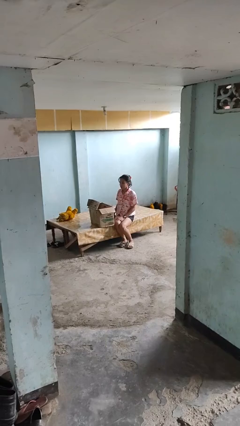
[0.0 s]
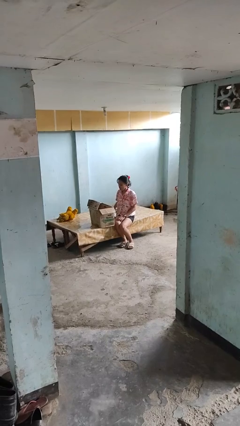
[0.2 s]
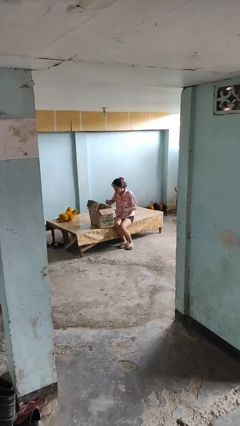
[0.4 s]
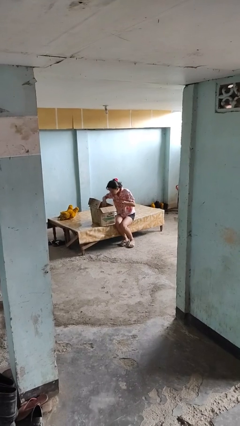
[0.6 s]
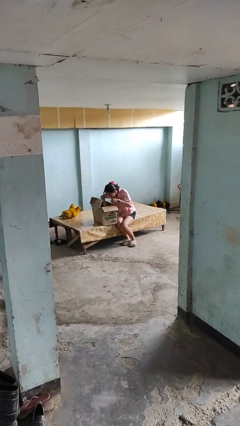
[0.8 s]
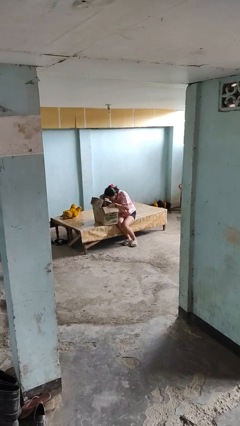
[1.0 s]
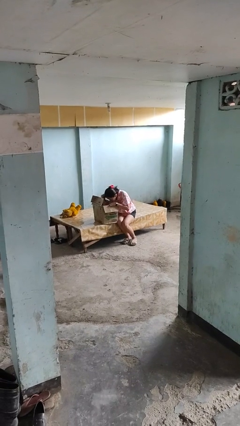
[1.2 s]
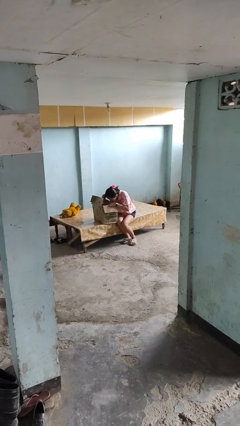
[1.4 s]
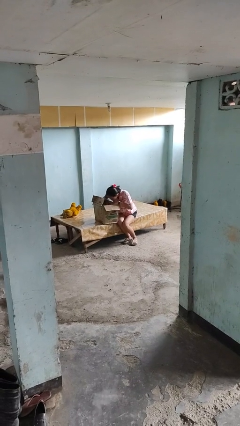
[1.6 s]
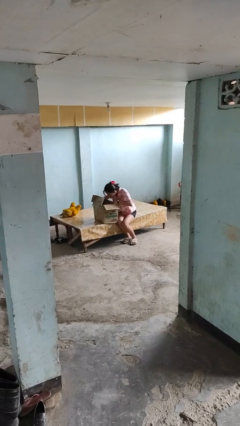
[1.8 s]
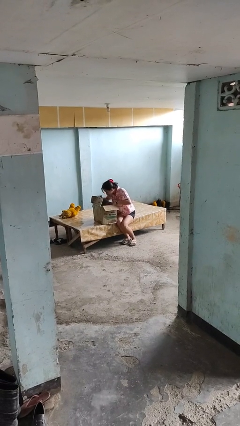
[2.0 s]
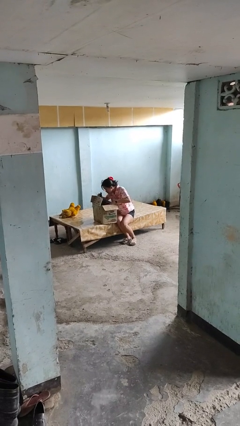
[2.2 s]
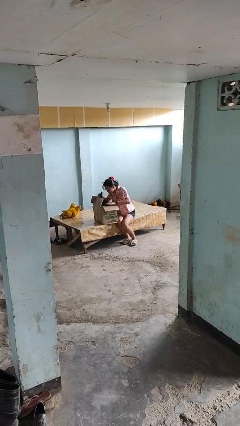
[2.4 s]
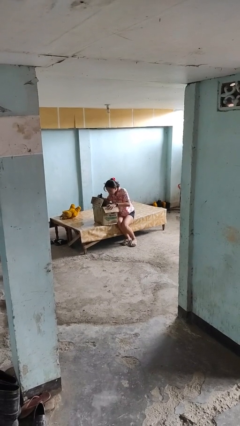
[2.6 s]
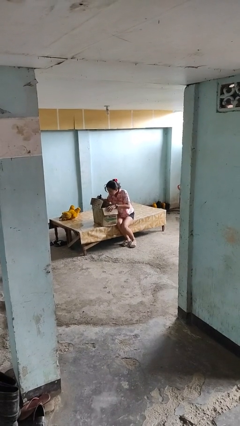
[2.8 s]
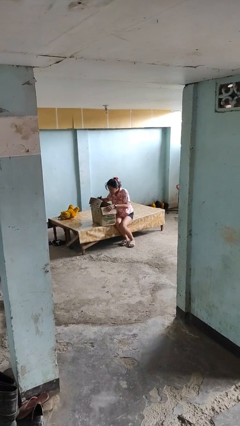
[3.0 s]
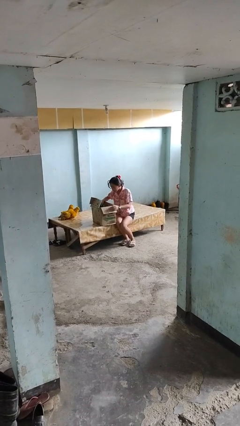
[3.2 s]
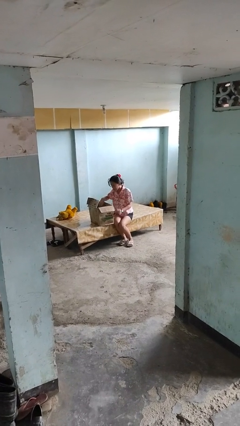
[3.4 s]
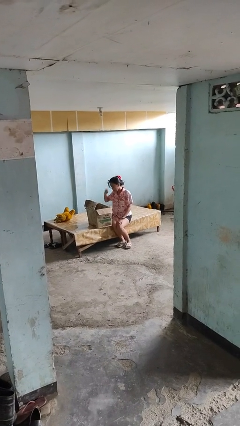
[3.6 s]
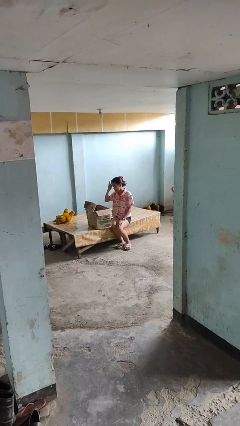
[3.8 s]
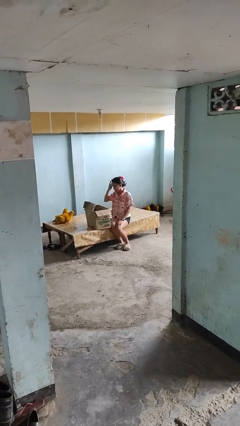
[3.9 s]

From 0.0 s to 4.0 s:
person searches in box

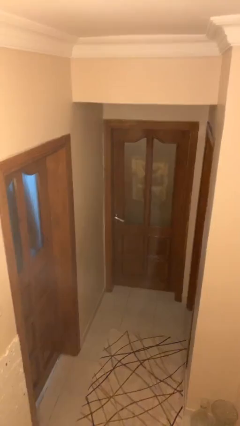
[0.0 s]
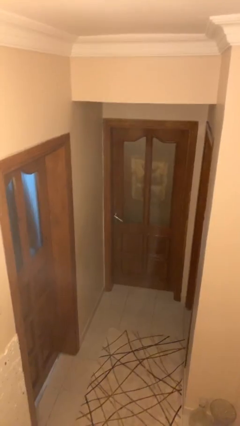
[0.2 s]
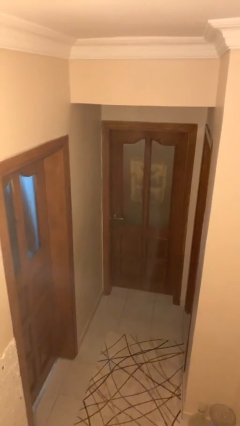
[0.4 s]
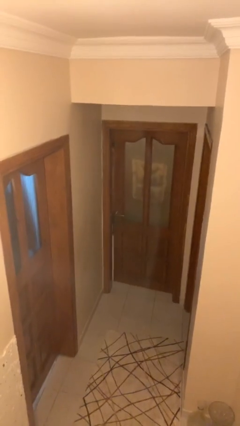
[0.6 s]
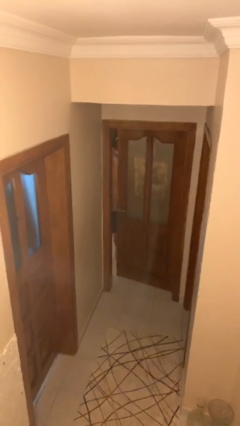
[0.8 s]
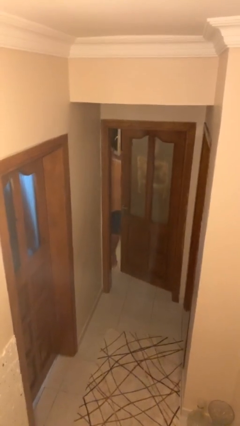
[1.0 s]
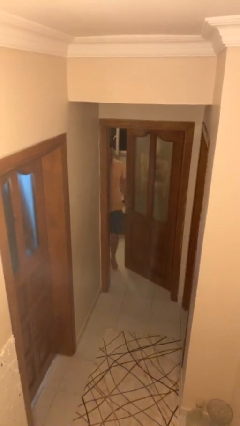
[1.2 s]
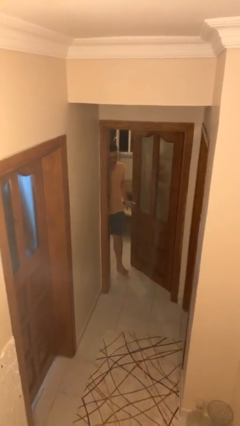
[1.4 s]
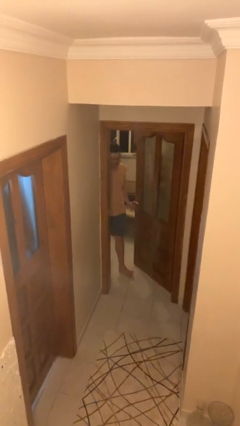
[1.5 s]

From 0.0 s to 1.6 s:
person opens facility door

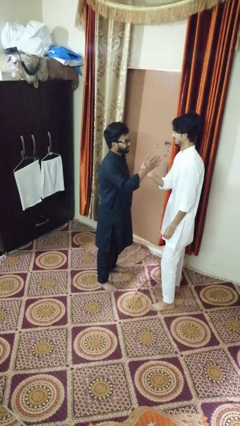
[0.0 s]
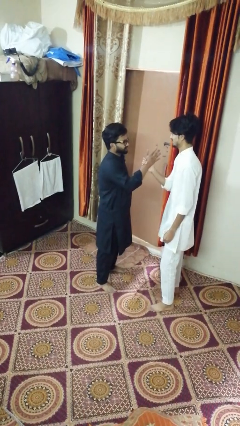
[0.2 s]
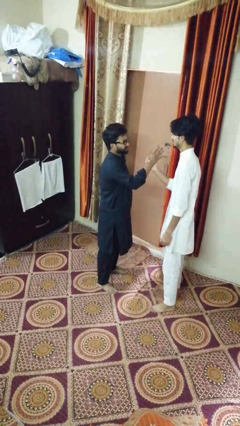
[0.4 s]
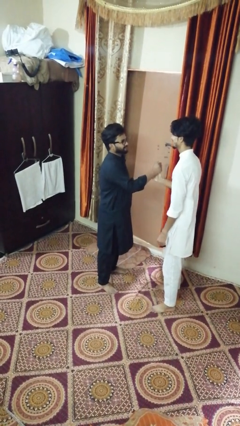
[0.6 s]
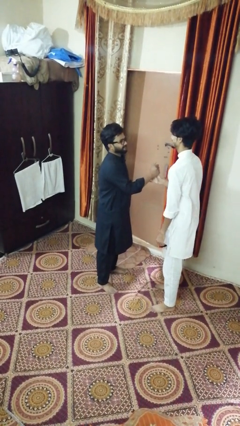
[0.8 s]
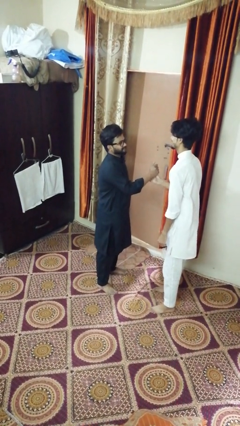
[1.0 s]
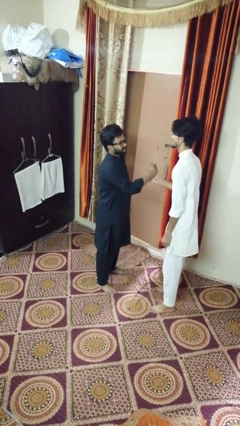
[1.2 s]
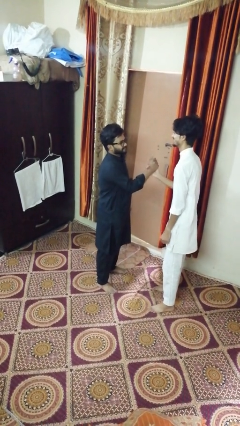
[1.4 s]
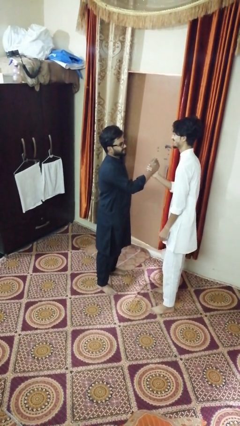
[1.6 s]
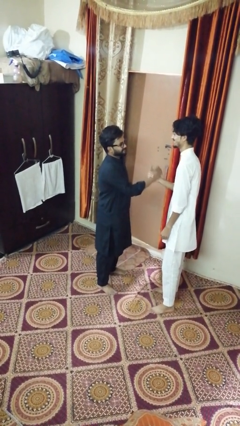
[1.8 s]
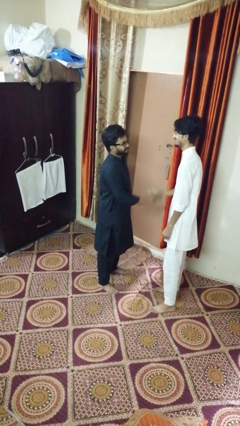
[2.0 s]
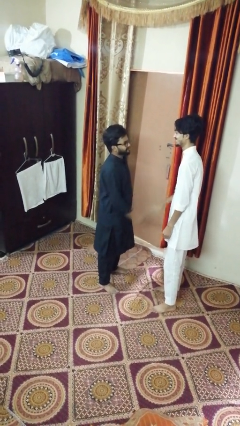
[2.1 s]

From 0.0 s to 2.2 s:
person highfives hand

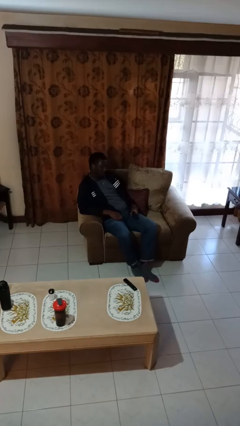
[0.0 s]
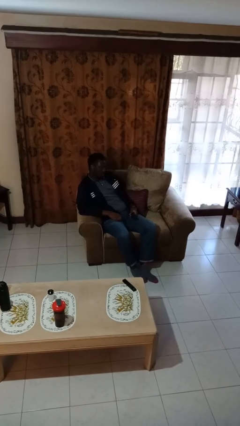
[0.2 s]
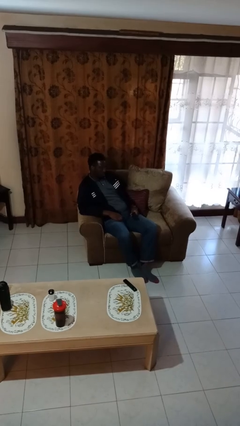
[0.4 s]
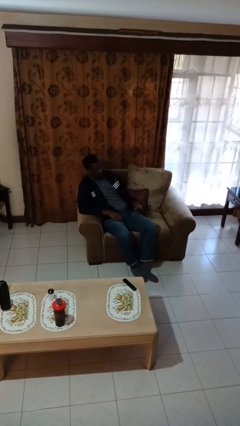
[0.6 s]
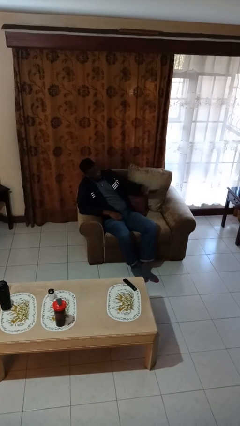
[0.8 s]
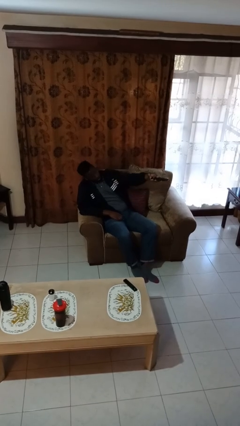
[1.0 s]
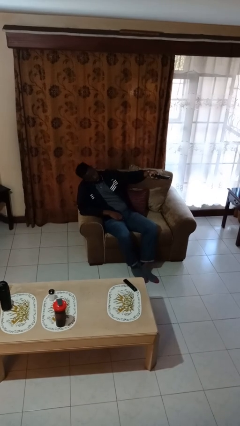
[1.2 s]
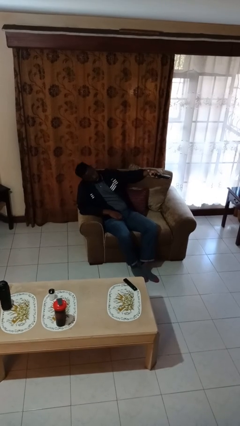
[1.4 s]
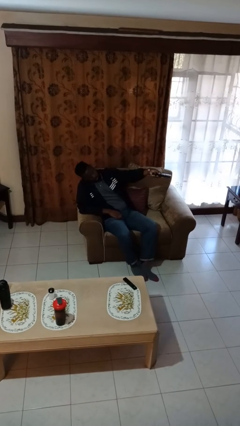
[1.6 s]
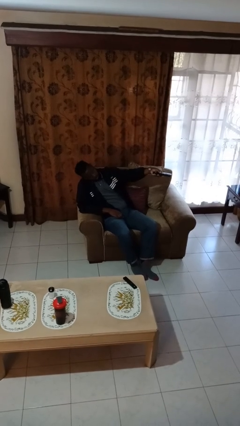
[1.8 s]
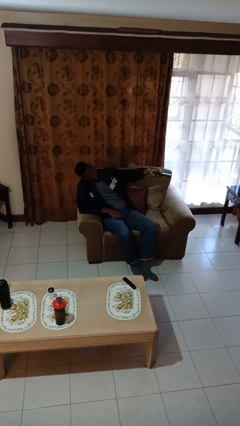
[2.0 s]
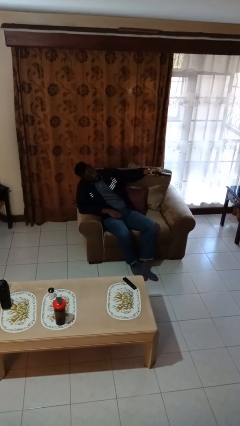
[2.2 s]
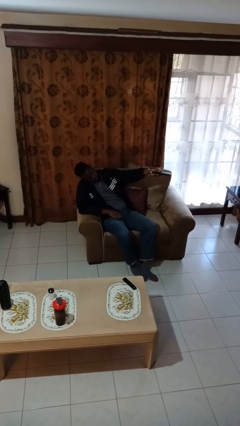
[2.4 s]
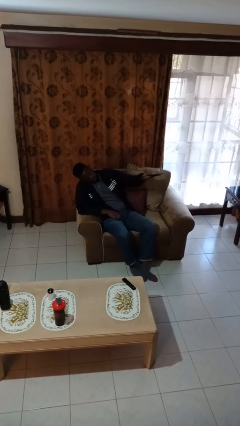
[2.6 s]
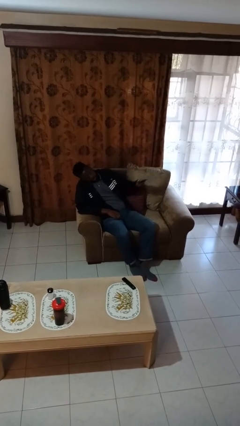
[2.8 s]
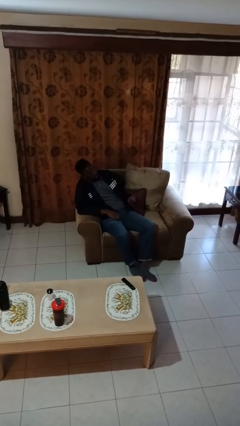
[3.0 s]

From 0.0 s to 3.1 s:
person uses television remote

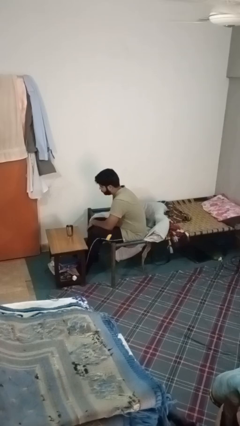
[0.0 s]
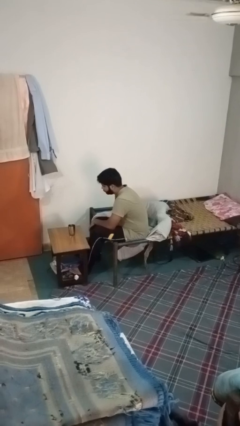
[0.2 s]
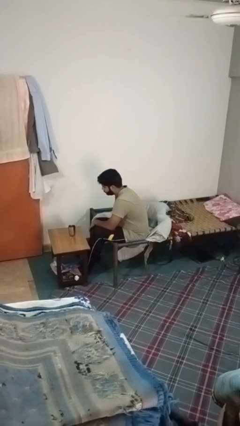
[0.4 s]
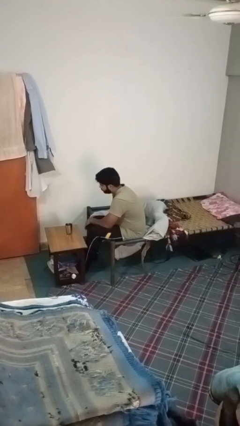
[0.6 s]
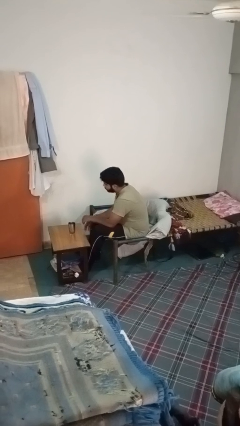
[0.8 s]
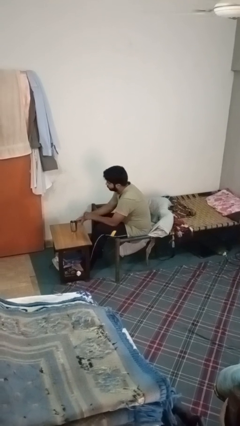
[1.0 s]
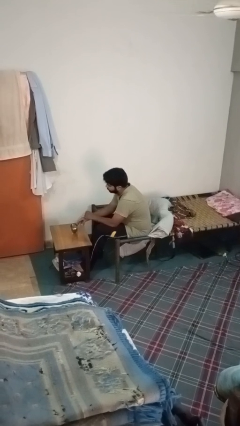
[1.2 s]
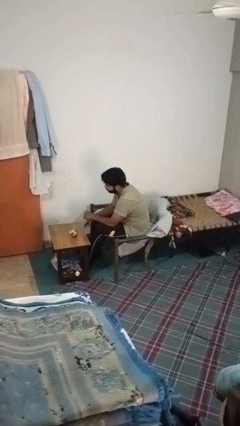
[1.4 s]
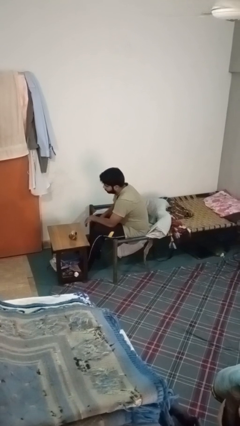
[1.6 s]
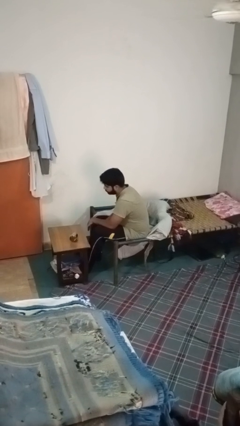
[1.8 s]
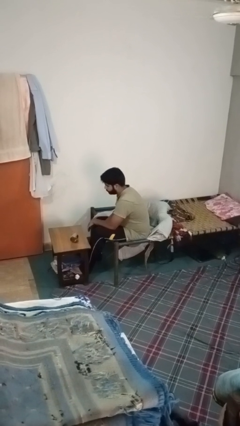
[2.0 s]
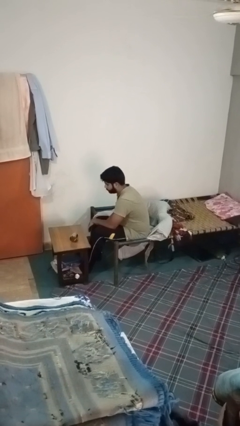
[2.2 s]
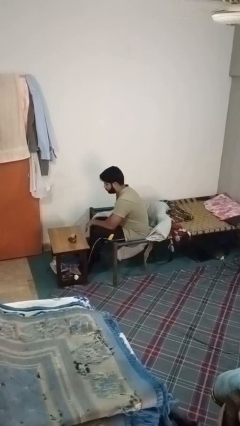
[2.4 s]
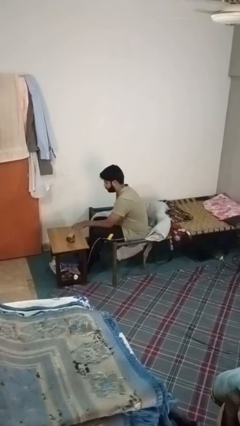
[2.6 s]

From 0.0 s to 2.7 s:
person knocks over glass

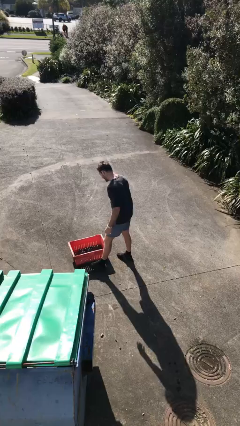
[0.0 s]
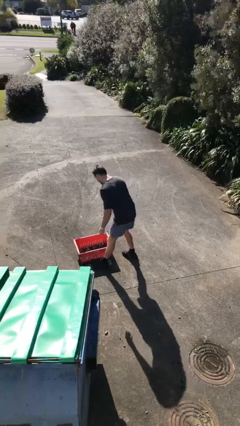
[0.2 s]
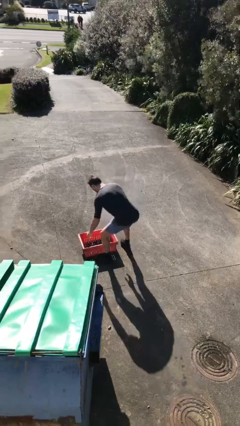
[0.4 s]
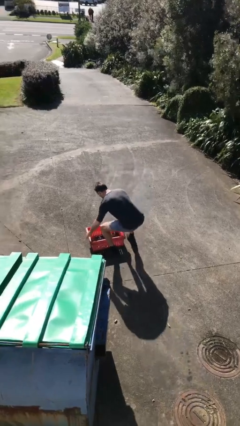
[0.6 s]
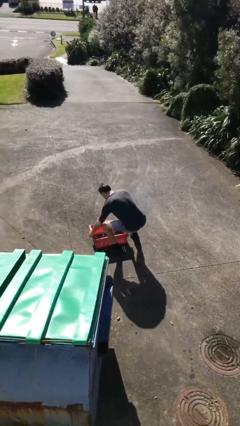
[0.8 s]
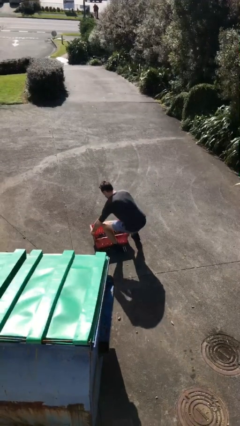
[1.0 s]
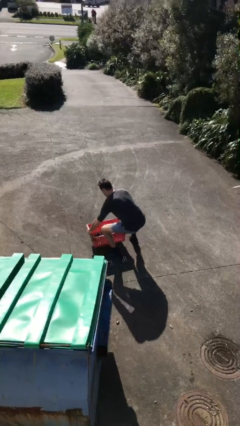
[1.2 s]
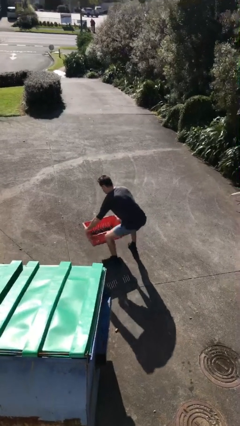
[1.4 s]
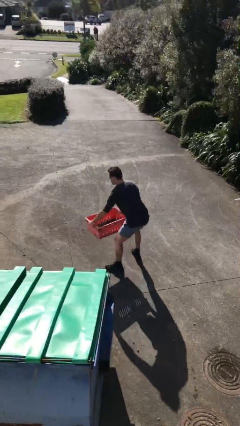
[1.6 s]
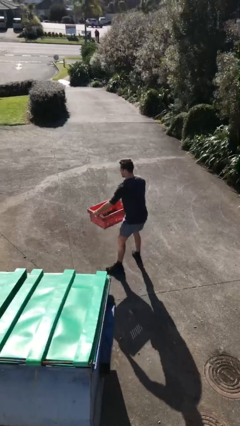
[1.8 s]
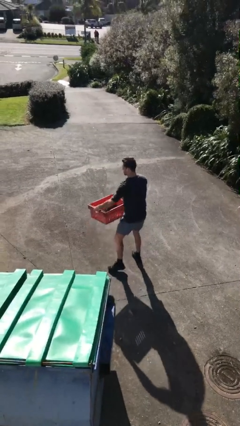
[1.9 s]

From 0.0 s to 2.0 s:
person picks up object from floor

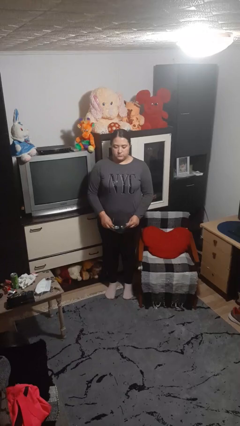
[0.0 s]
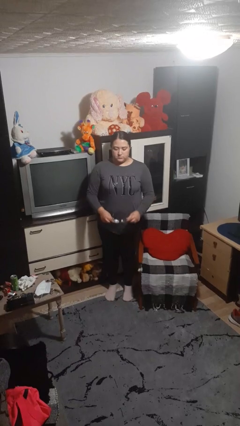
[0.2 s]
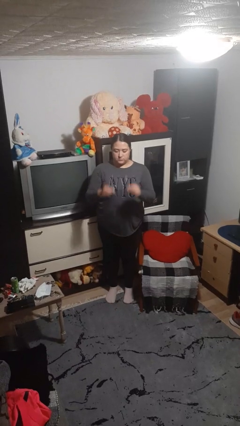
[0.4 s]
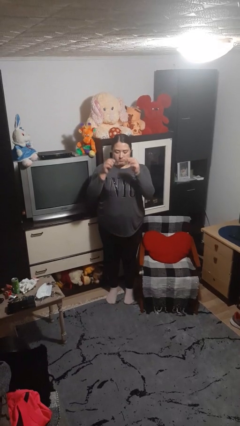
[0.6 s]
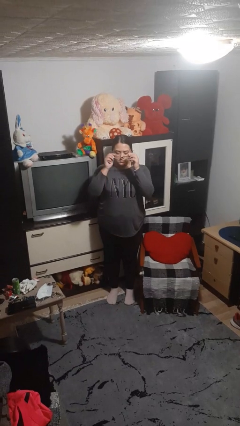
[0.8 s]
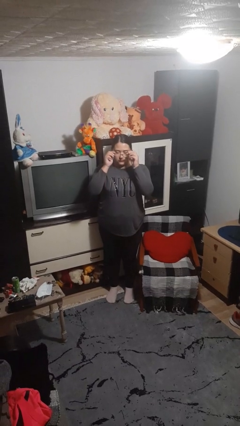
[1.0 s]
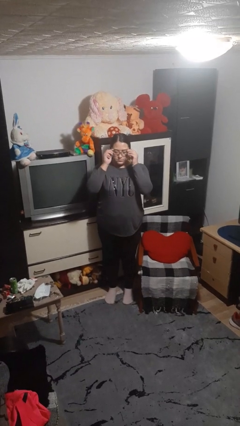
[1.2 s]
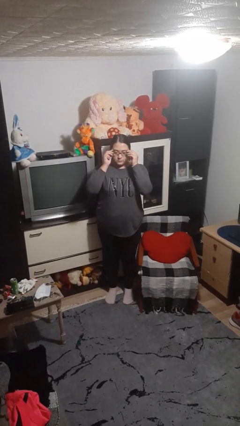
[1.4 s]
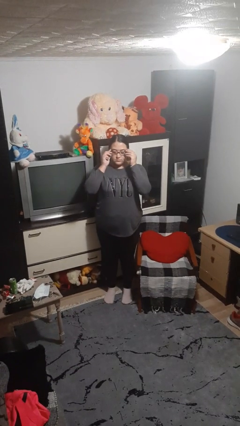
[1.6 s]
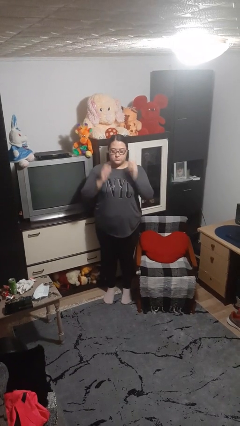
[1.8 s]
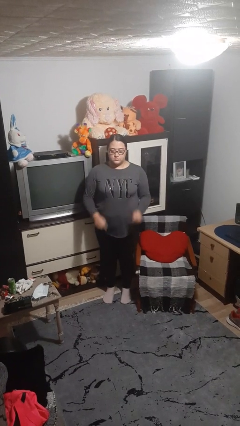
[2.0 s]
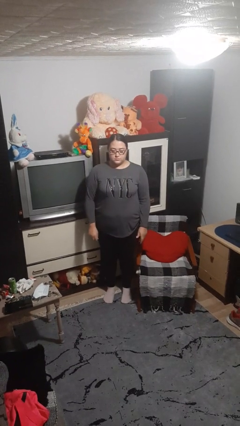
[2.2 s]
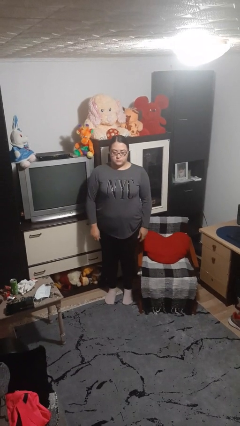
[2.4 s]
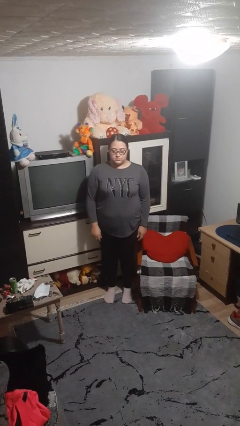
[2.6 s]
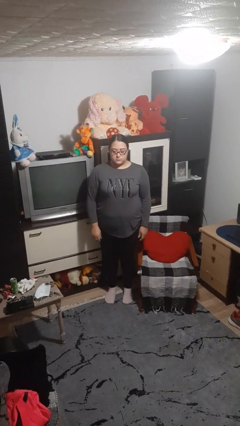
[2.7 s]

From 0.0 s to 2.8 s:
person puts on glasses
